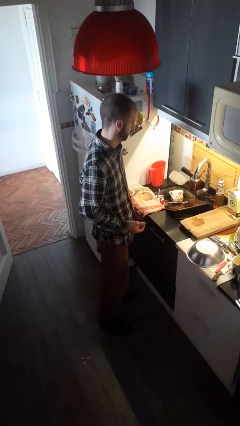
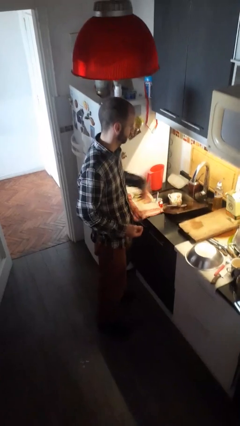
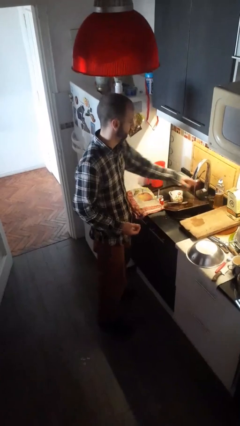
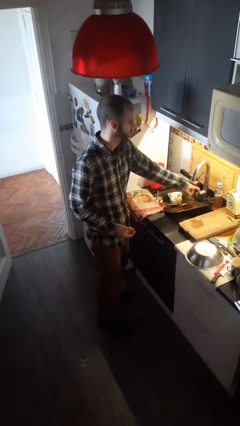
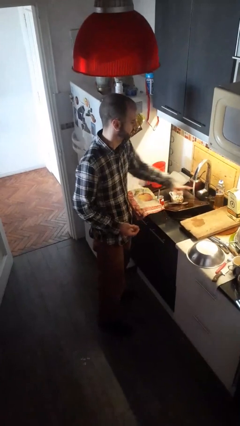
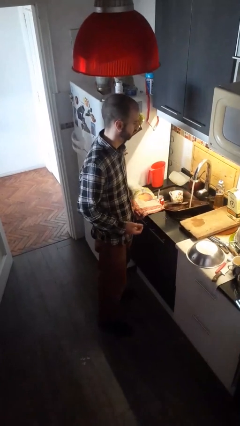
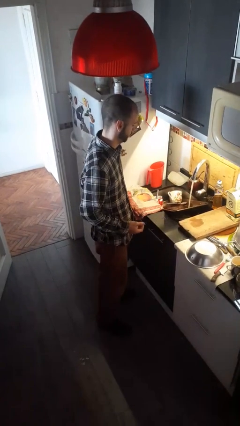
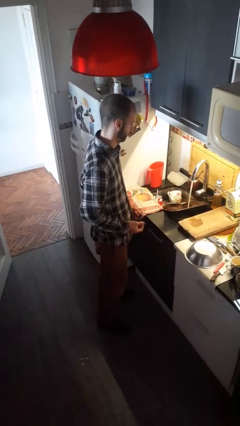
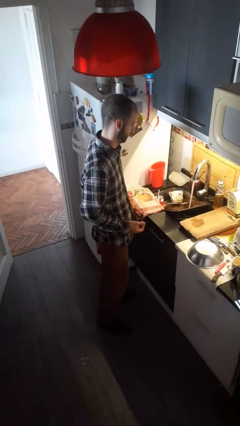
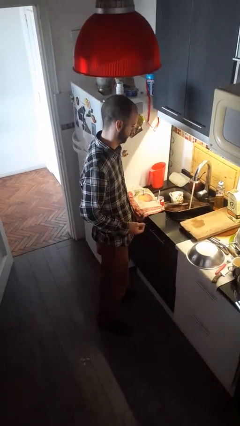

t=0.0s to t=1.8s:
person turns on faucet

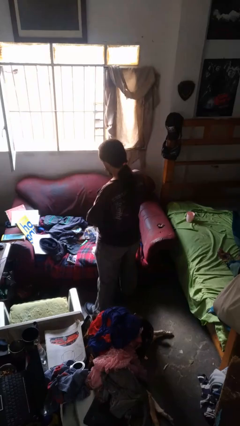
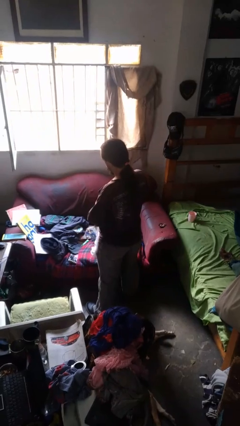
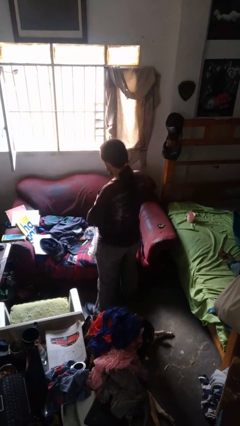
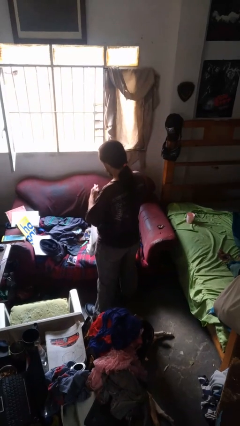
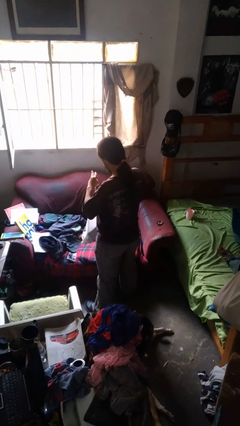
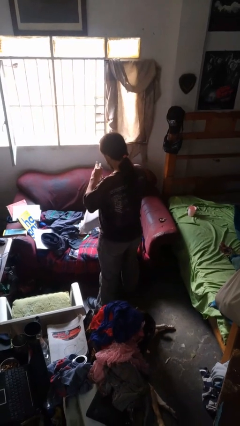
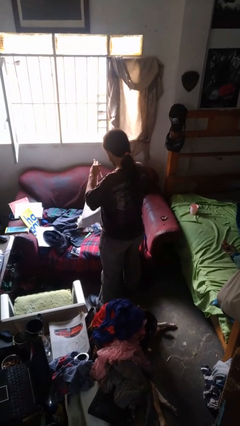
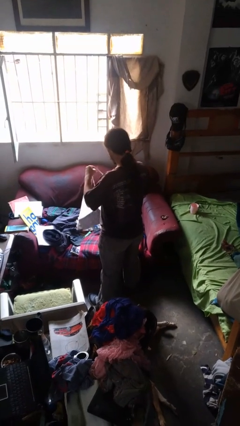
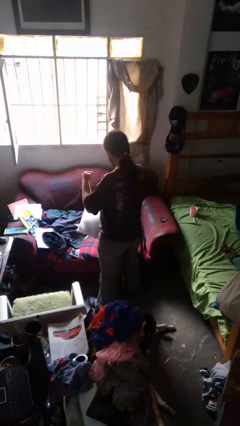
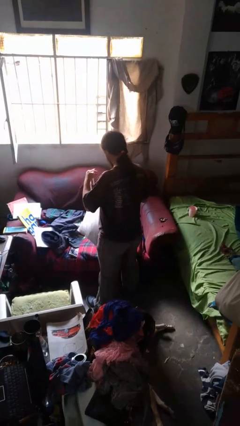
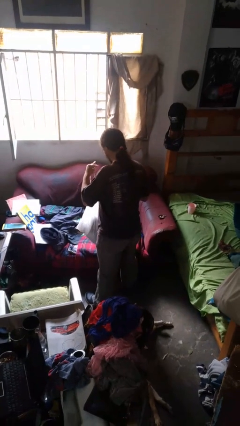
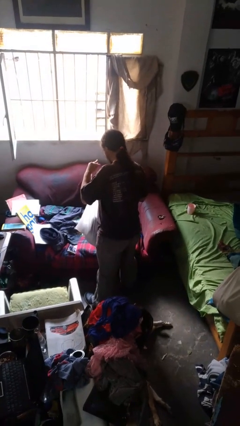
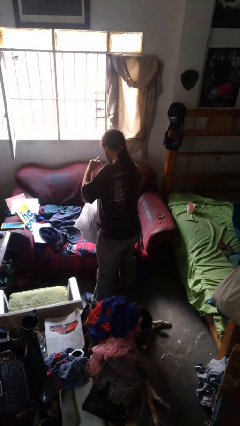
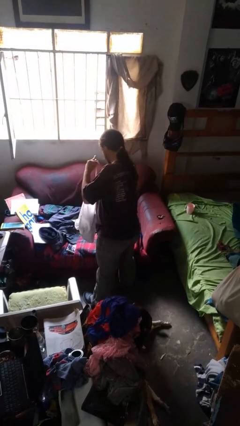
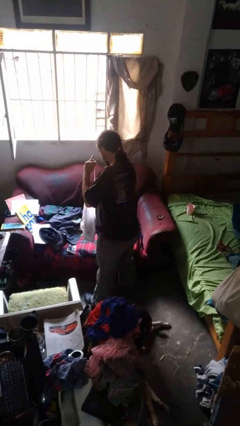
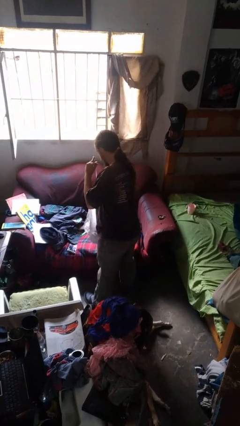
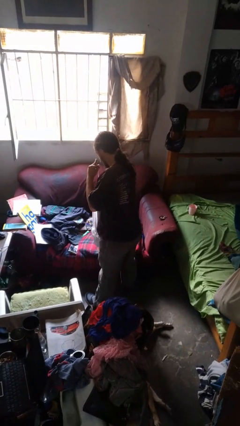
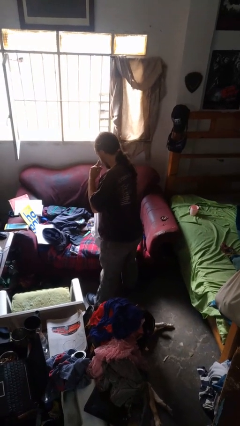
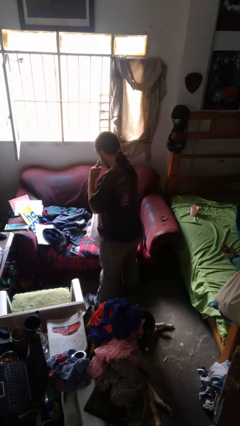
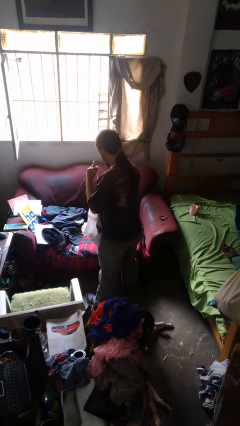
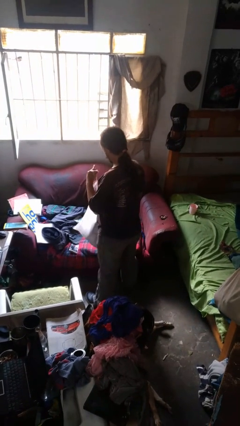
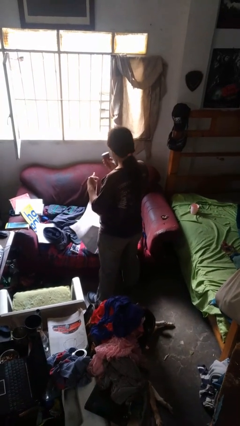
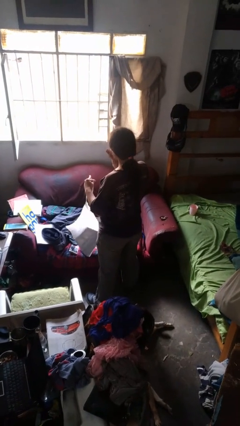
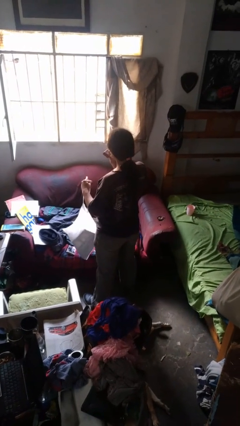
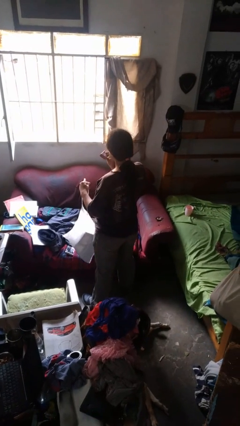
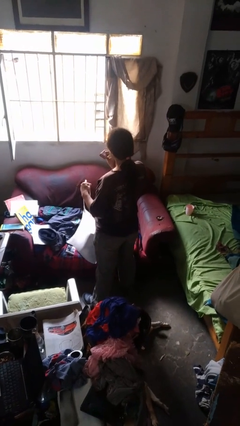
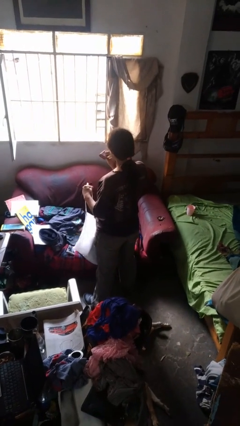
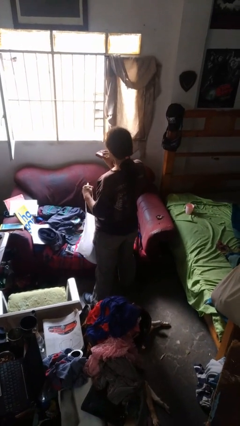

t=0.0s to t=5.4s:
person takes object from bag

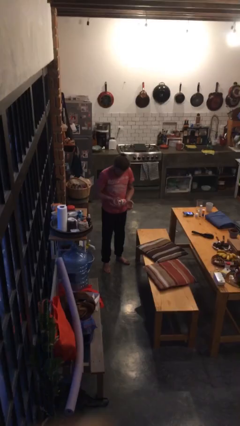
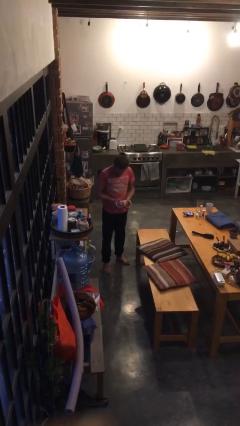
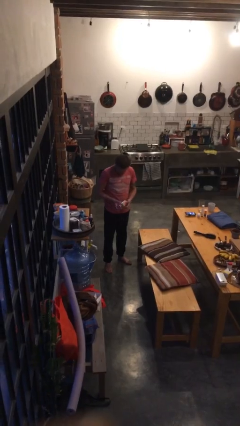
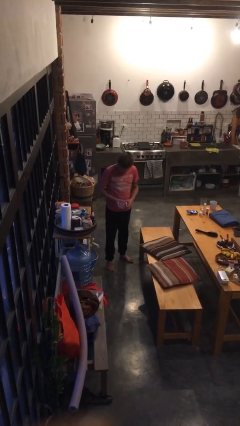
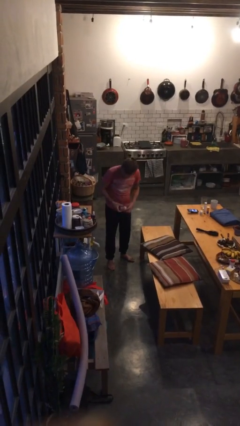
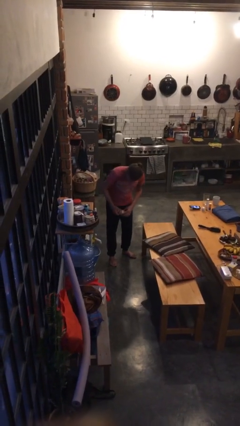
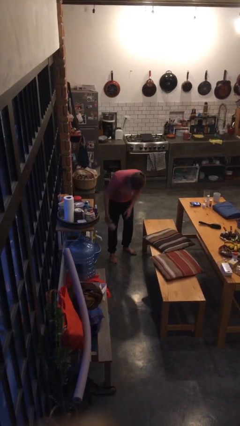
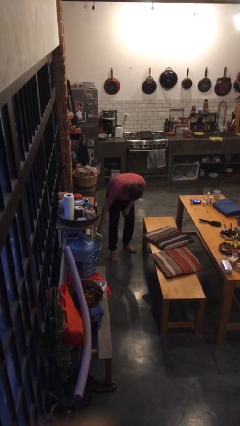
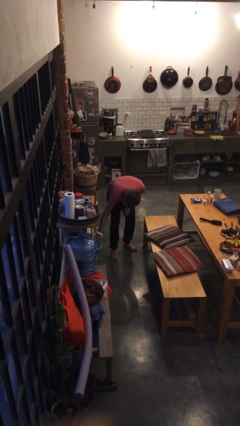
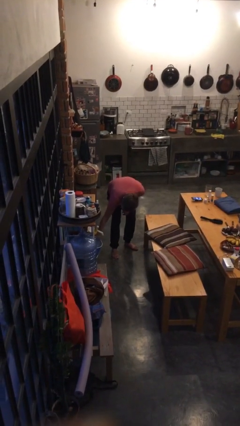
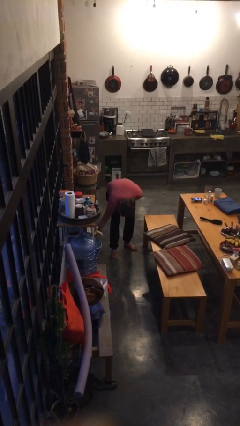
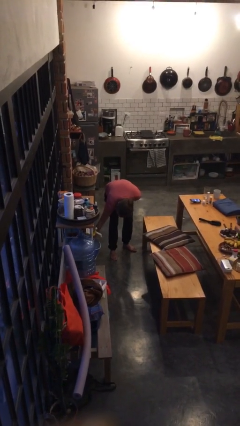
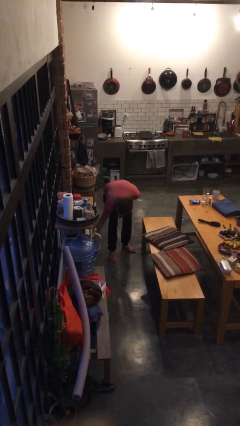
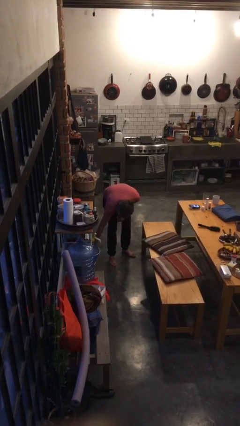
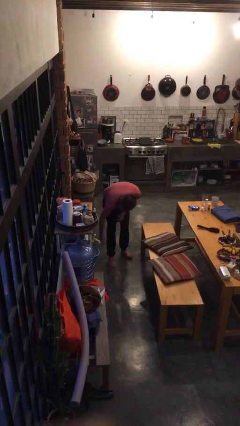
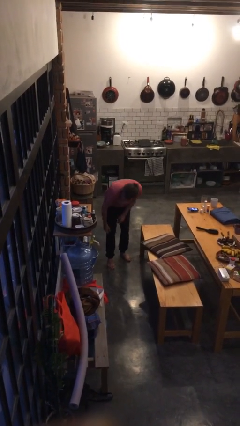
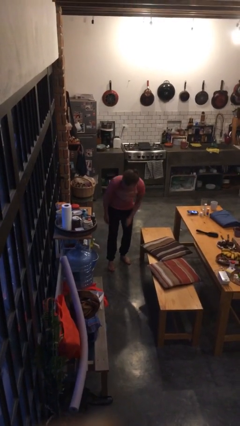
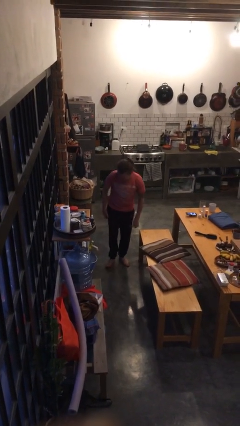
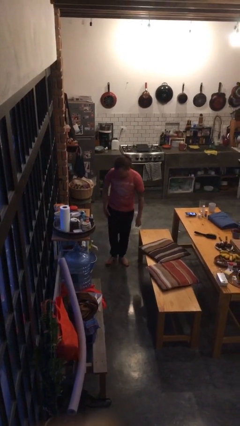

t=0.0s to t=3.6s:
person puts down object into cabinet

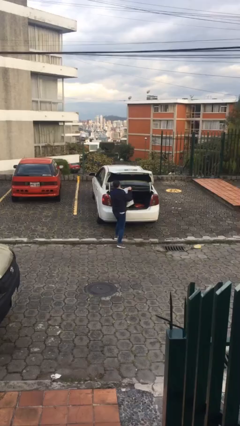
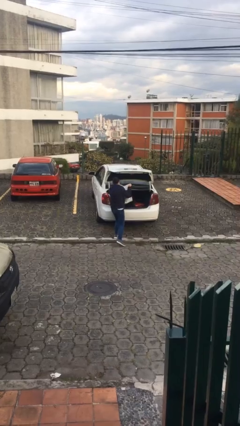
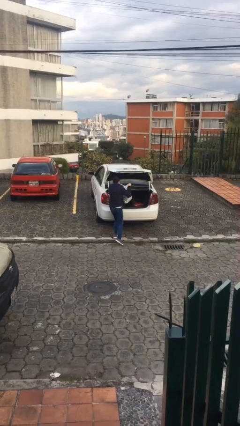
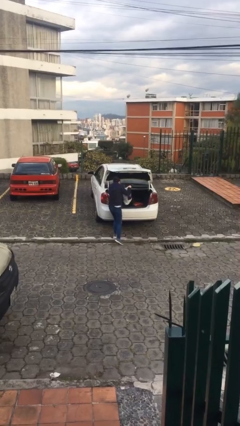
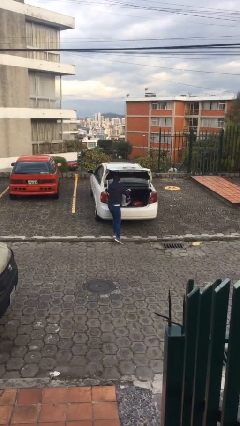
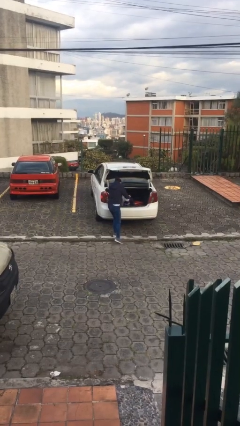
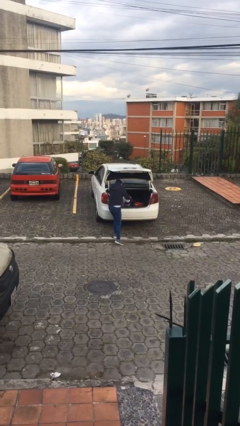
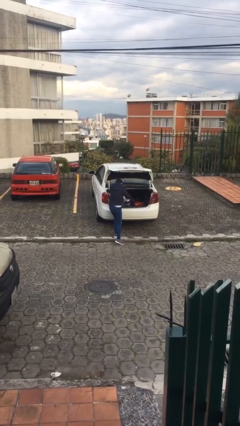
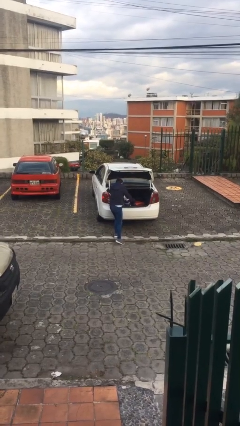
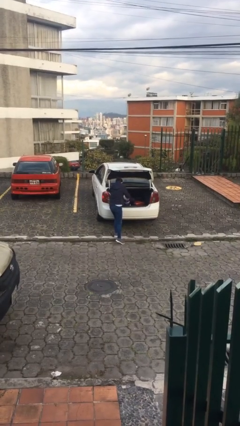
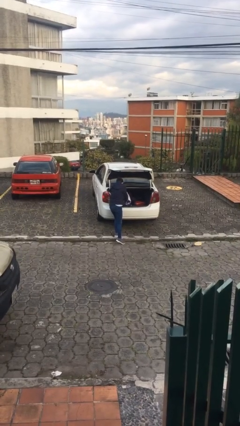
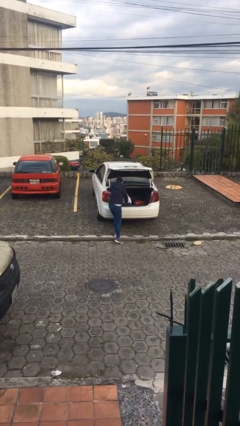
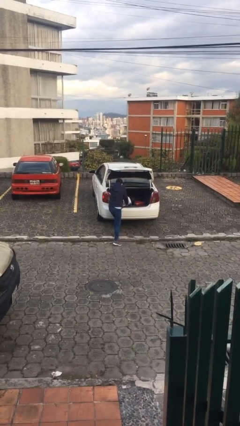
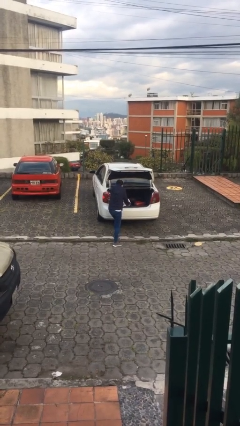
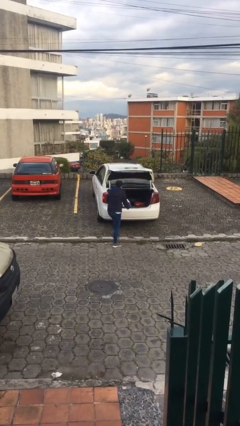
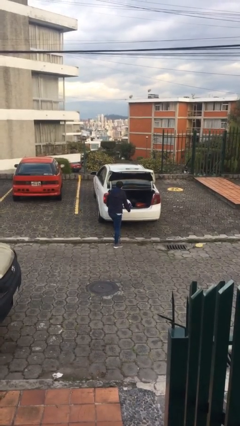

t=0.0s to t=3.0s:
person loads car

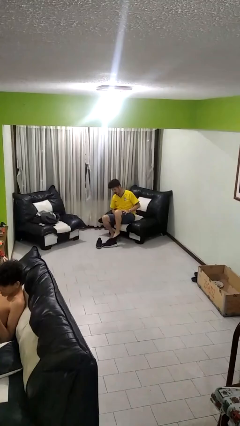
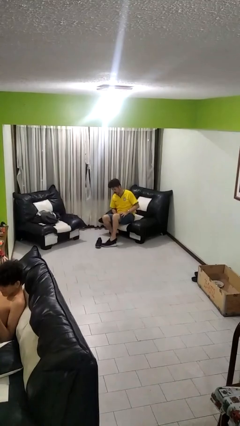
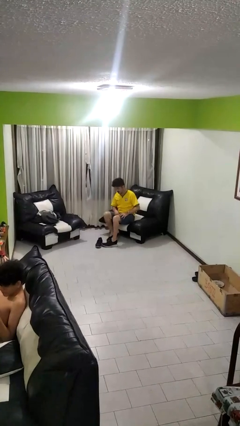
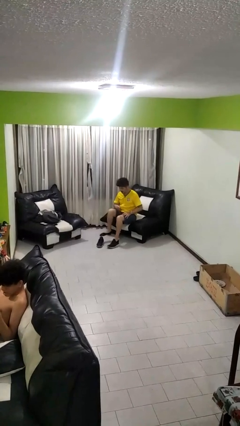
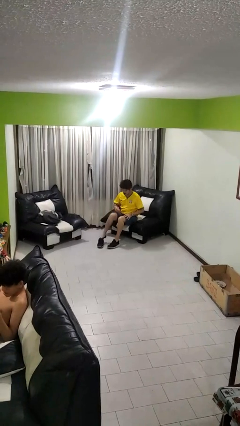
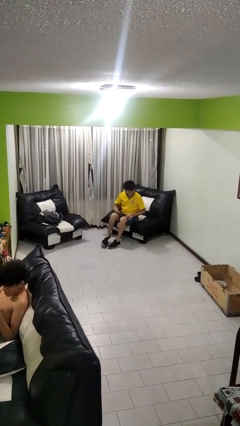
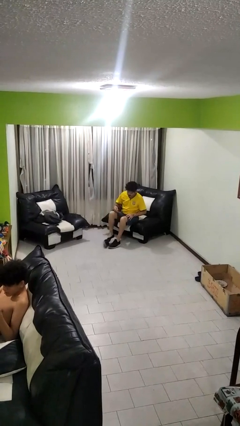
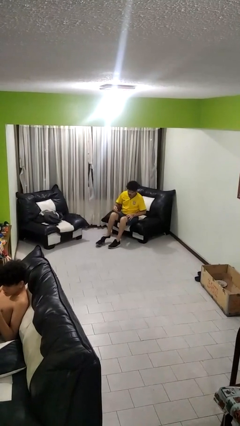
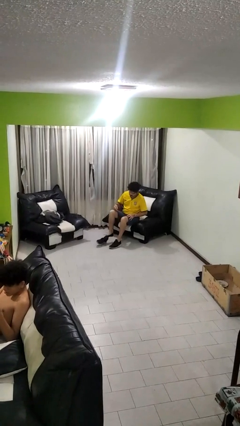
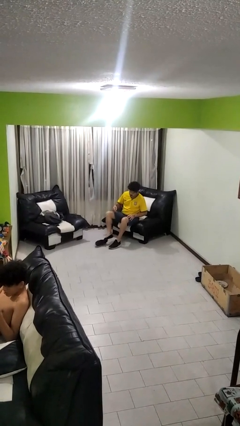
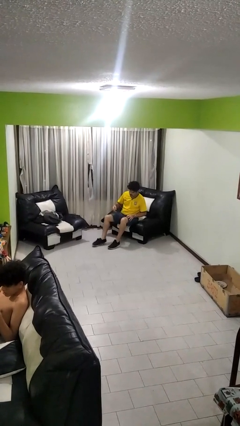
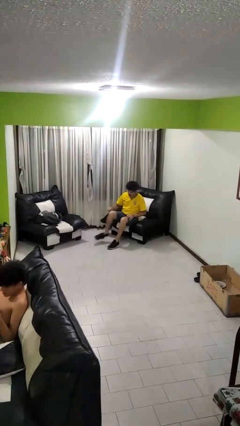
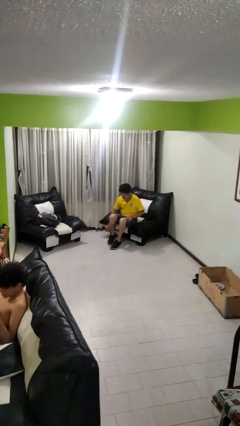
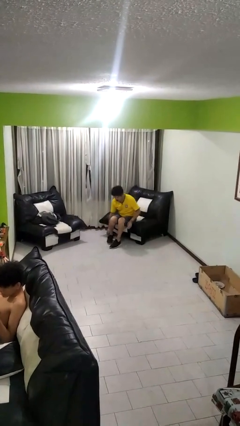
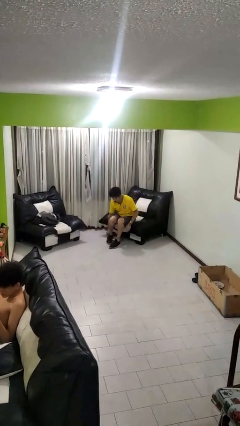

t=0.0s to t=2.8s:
person puts on shoes

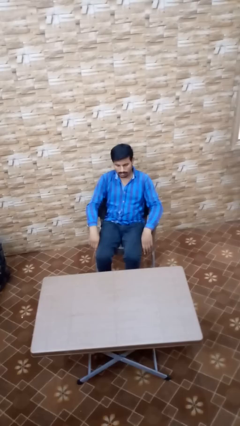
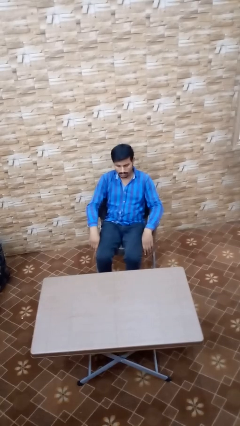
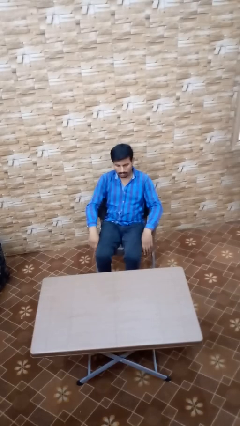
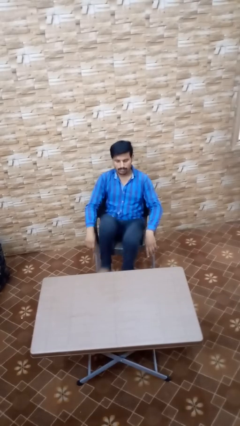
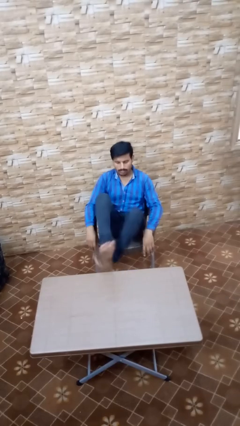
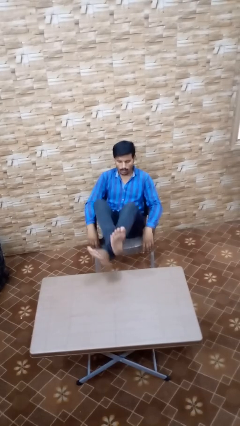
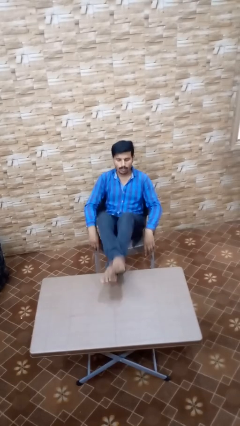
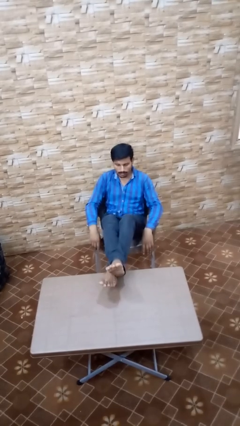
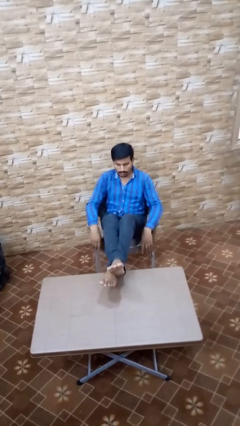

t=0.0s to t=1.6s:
person puts feet up
